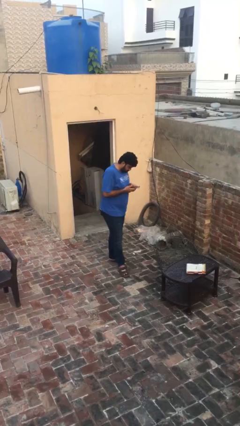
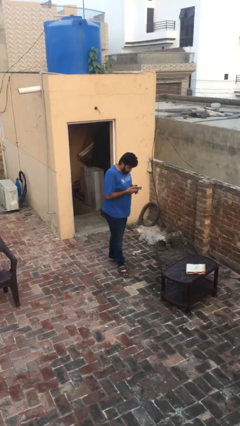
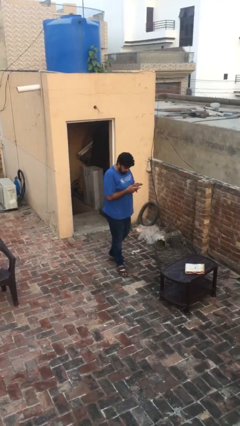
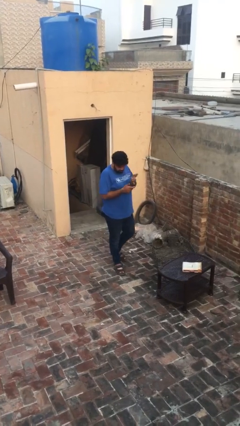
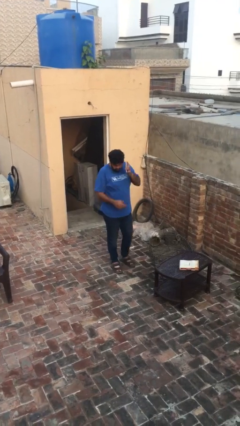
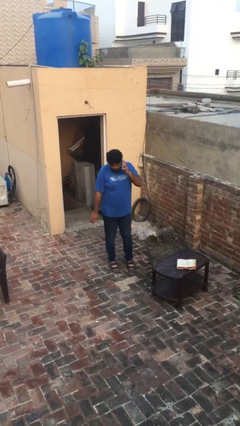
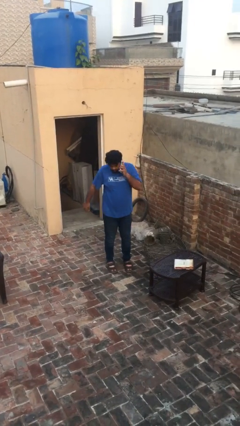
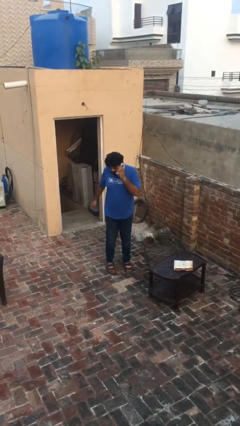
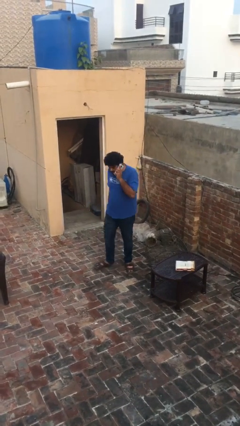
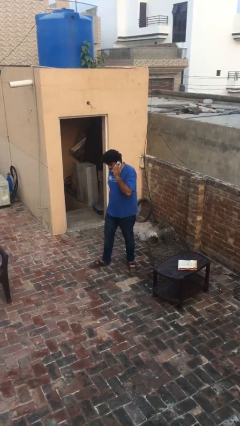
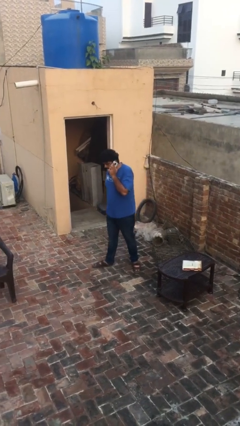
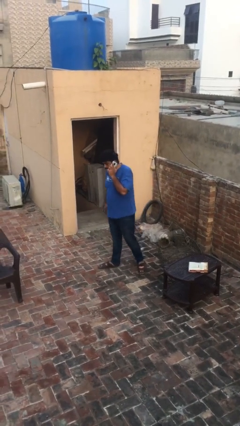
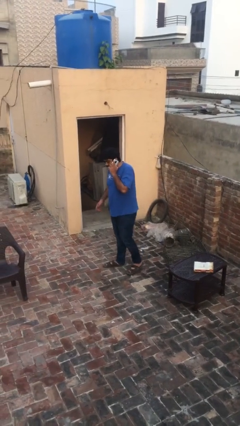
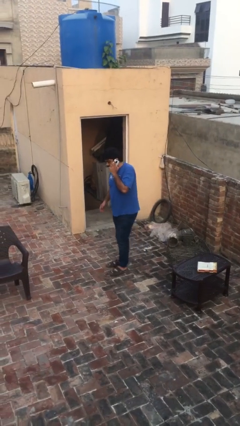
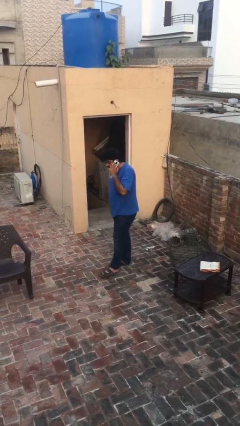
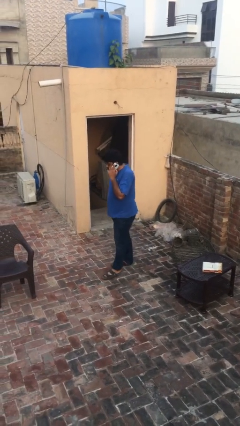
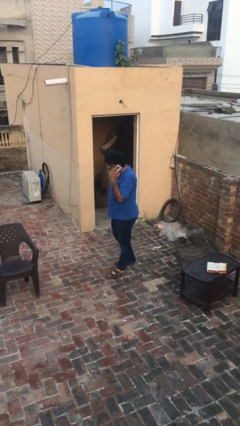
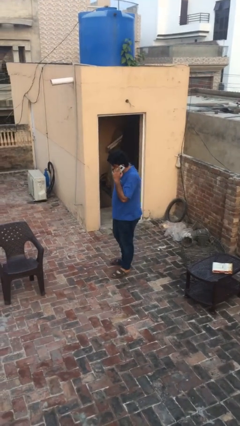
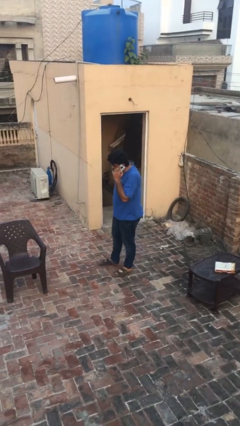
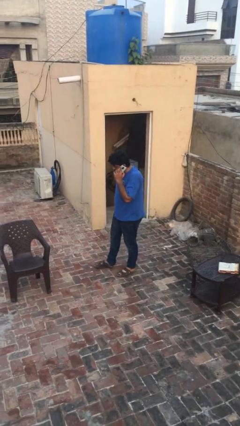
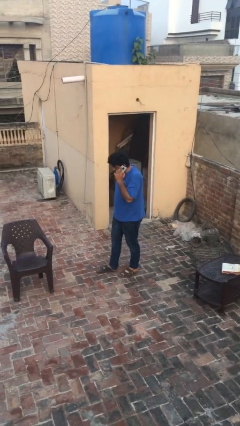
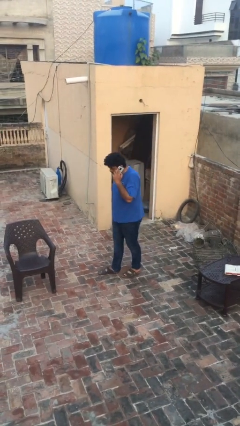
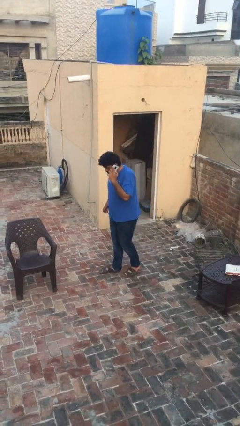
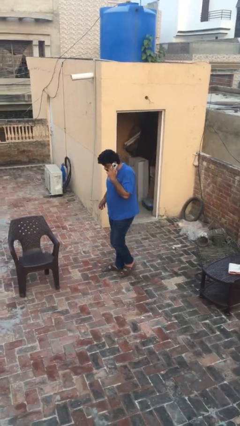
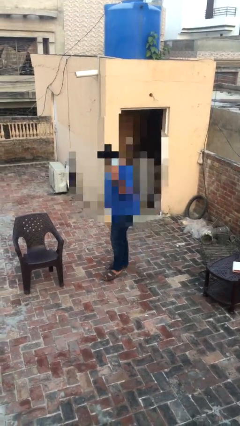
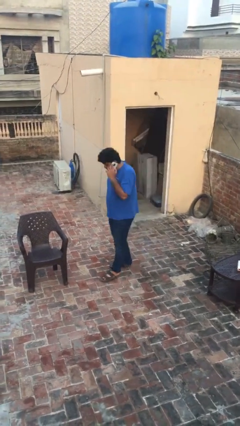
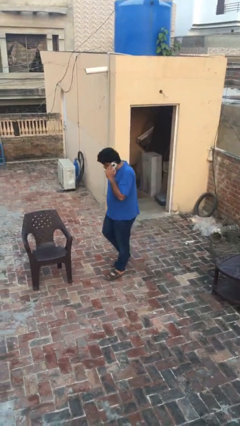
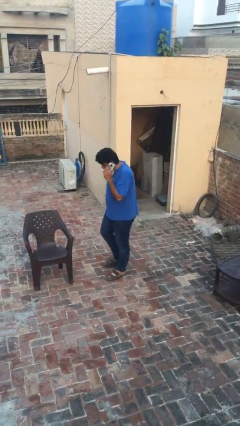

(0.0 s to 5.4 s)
person talks on phone

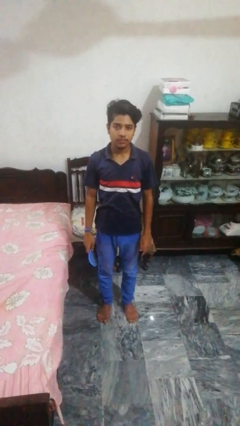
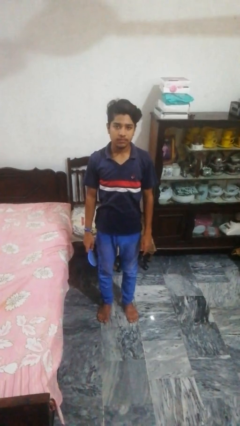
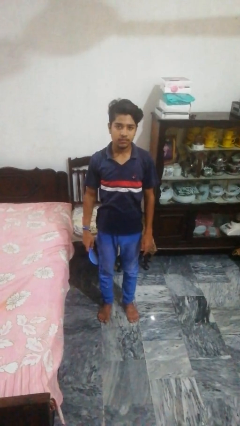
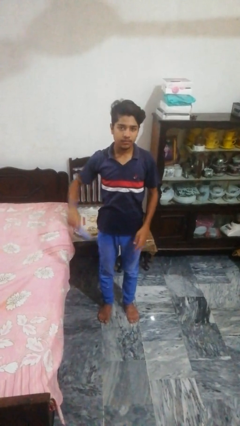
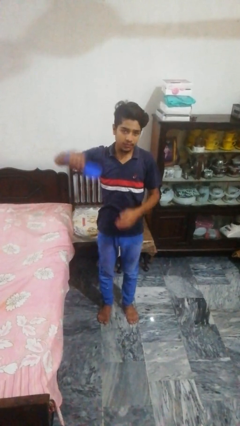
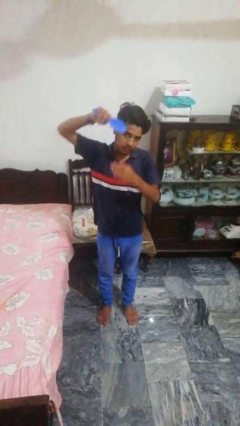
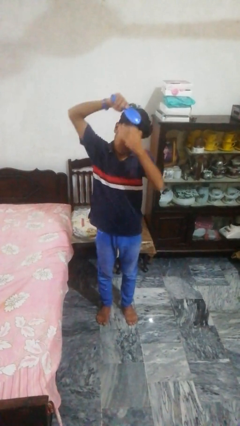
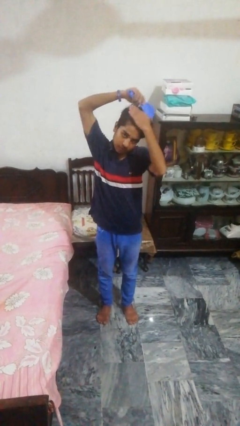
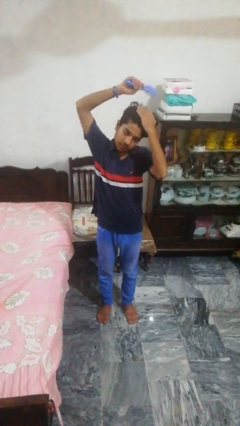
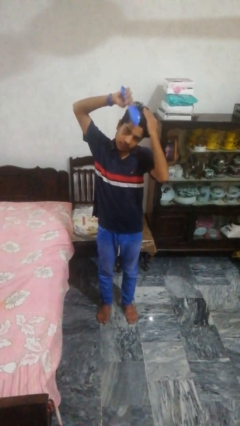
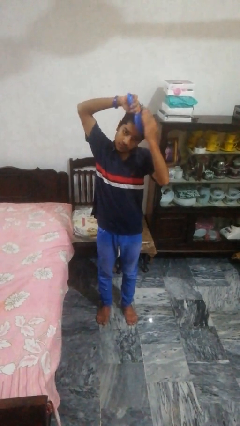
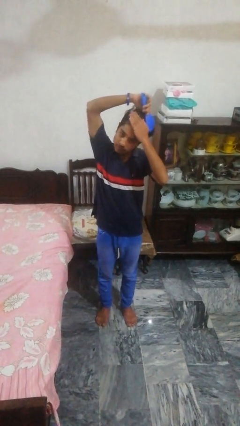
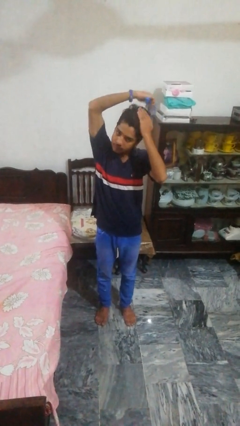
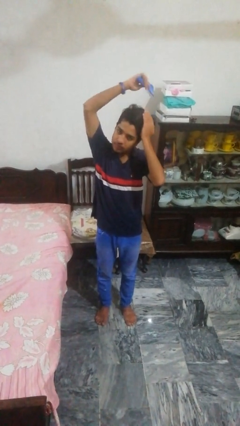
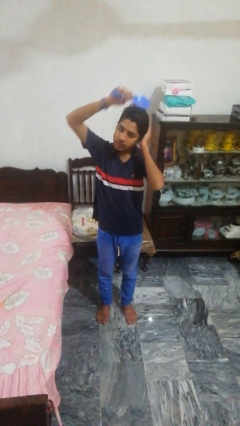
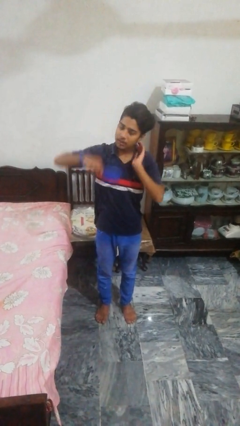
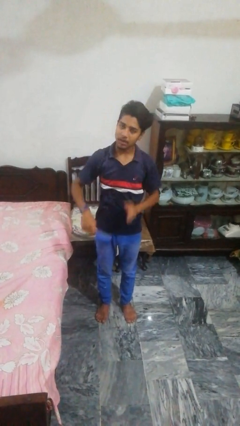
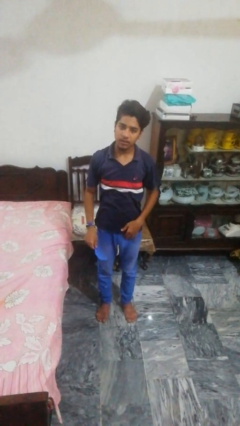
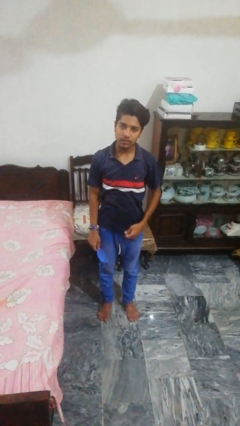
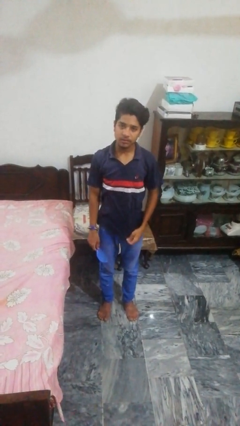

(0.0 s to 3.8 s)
person brushes hair

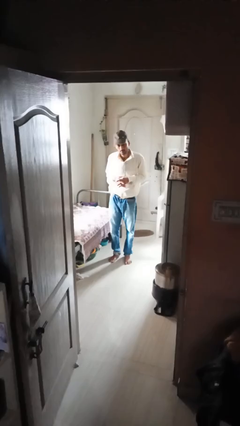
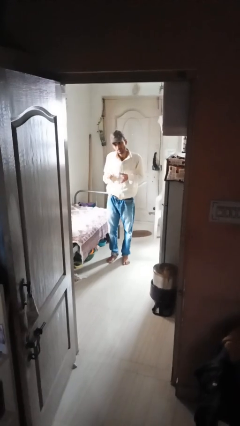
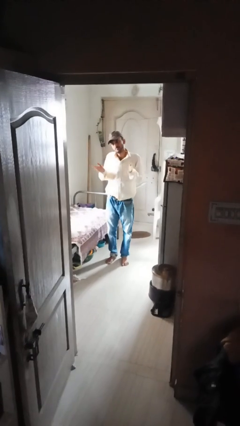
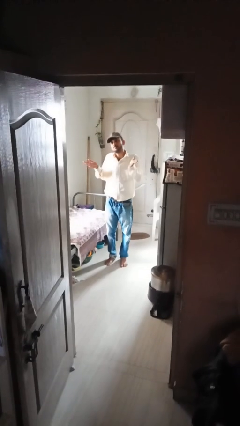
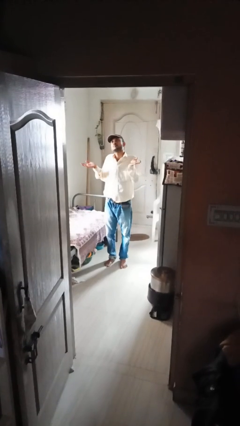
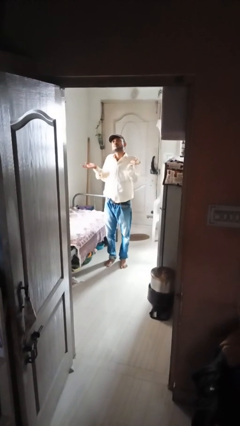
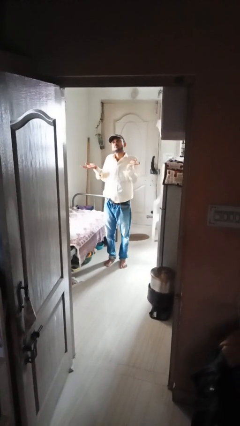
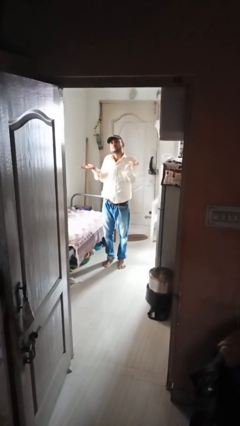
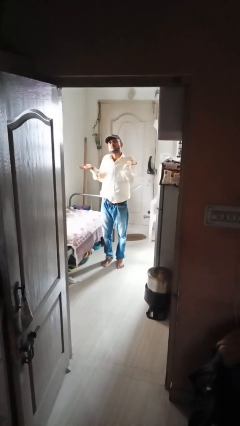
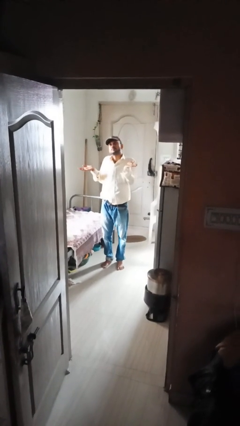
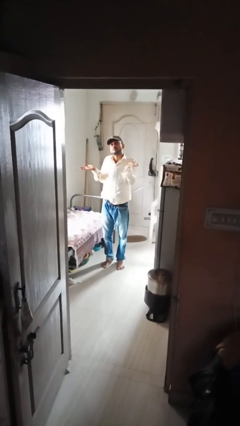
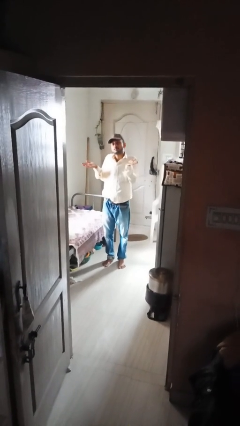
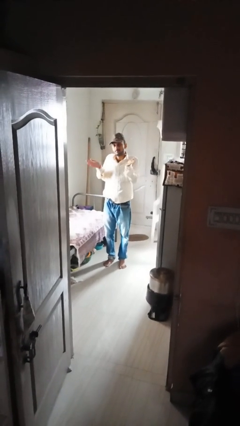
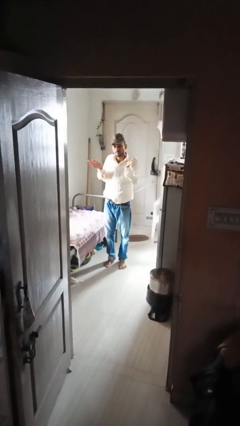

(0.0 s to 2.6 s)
person shrugs

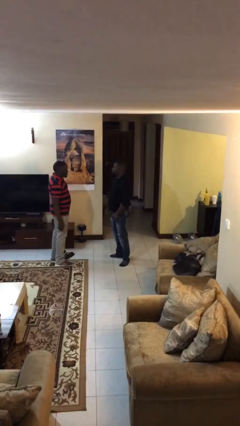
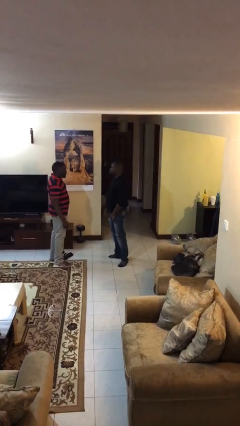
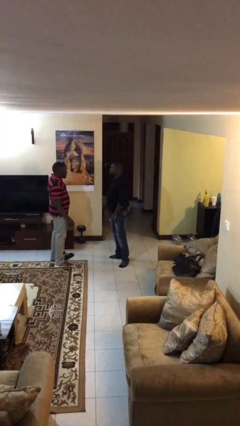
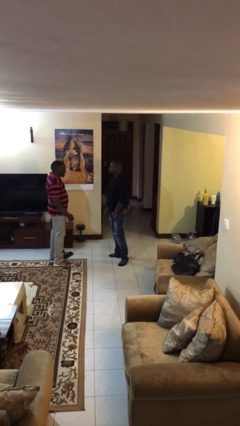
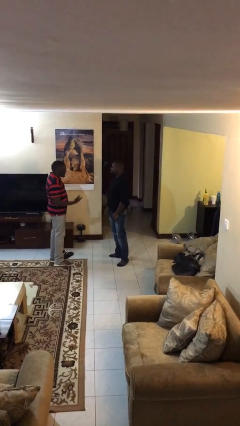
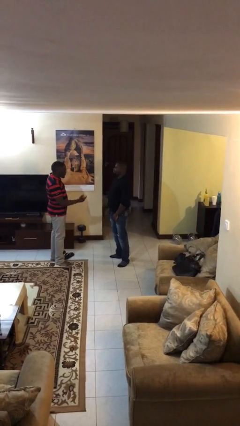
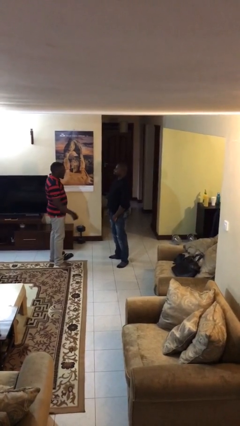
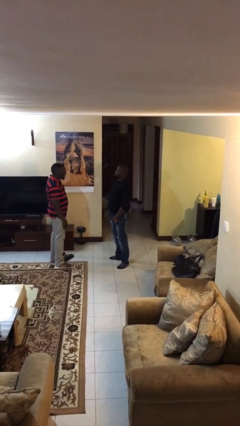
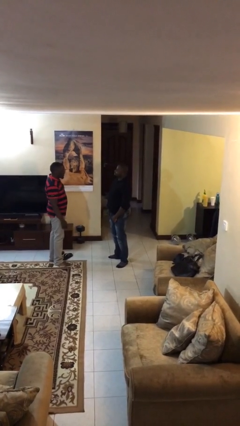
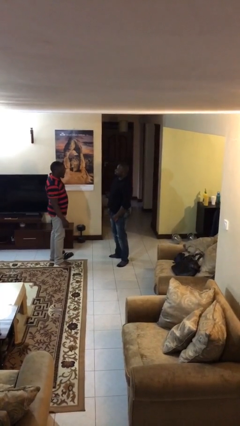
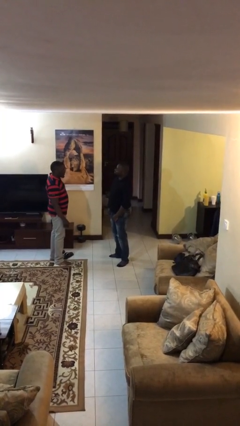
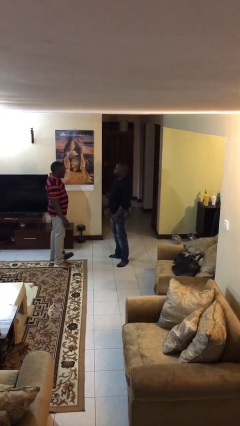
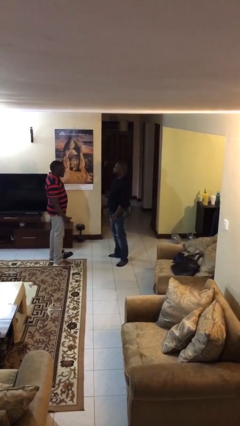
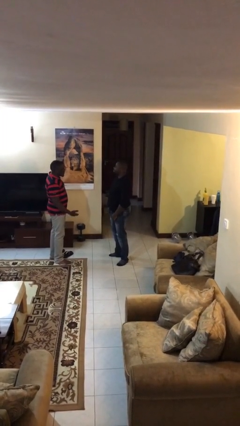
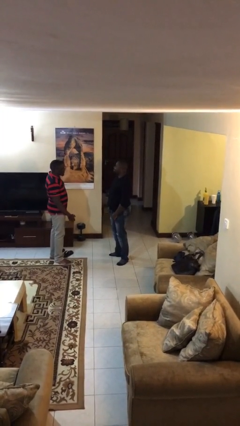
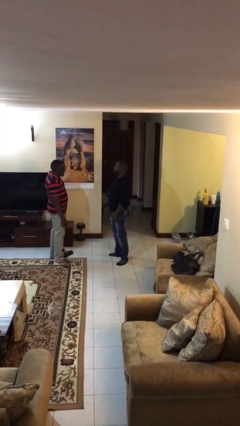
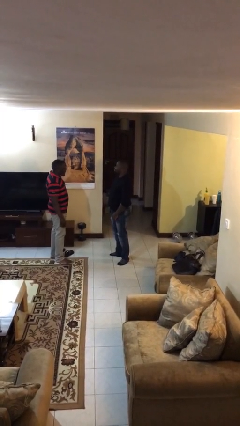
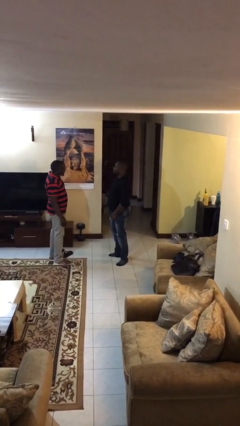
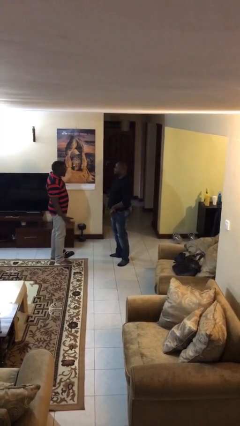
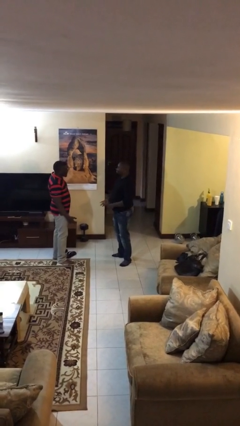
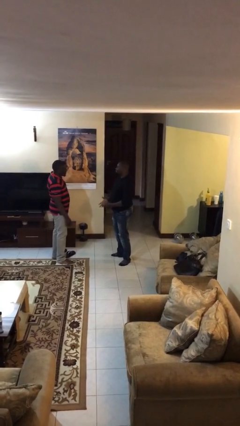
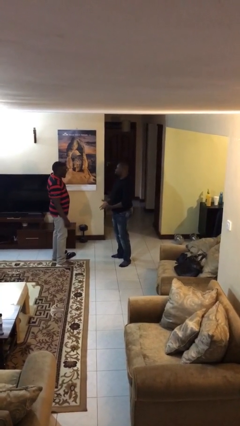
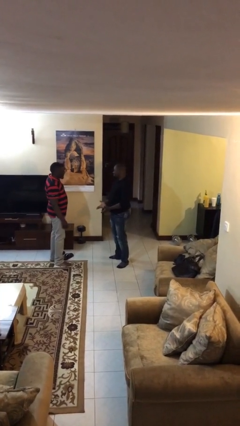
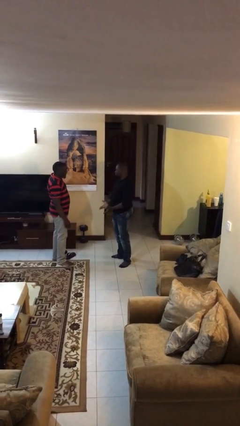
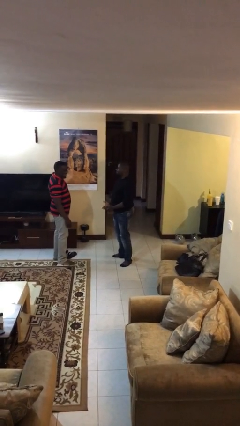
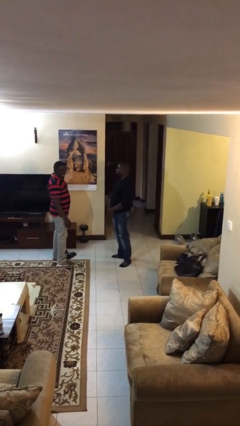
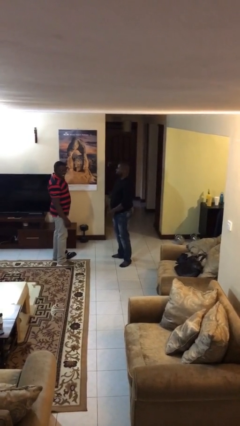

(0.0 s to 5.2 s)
person talks to person

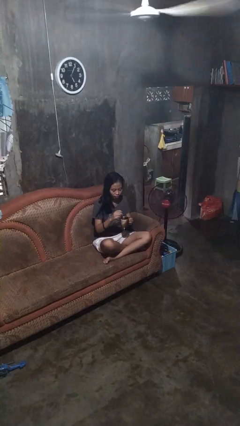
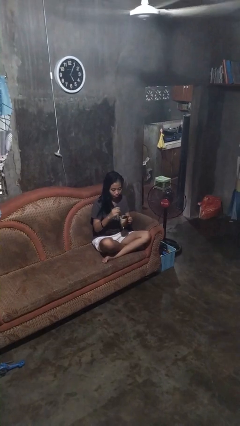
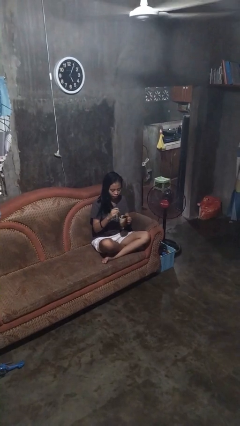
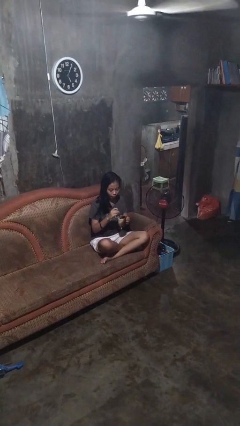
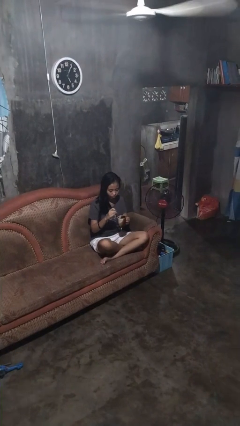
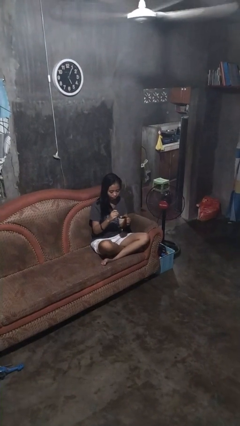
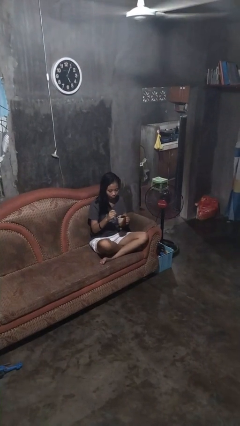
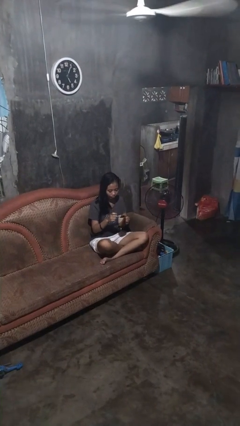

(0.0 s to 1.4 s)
person stirs mug
